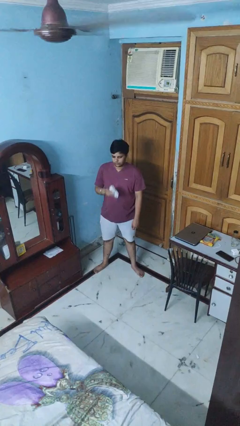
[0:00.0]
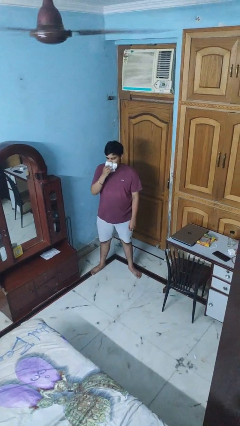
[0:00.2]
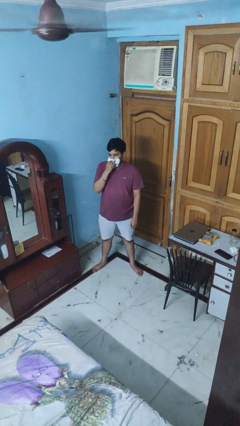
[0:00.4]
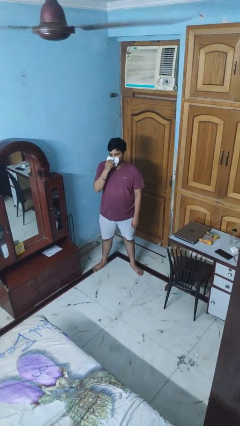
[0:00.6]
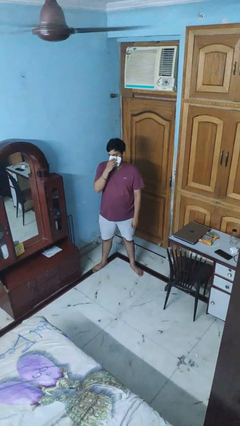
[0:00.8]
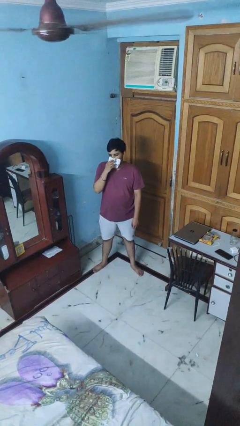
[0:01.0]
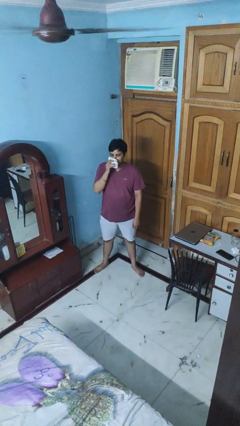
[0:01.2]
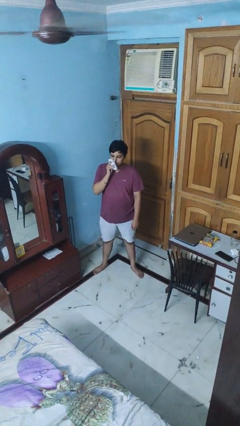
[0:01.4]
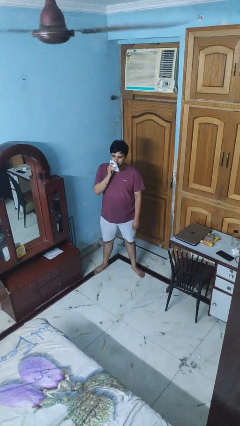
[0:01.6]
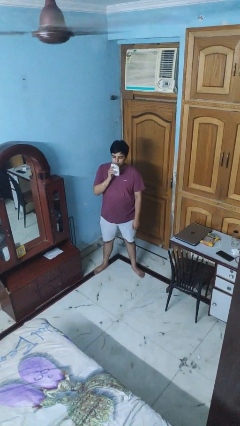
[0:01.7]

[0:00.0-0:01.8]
person wipes mouth with napkin

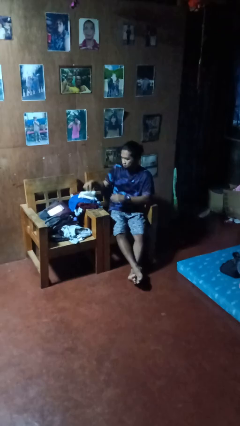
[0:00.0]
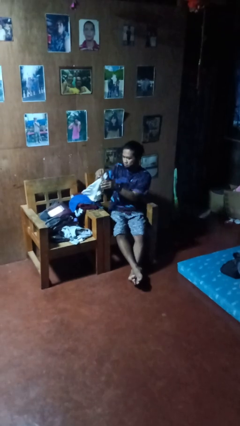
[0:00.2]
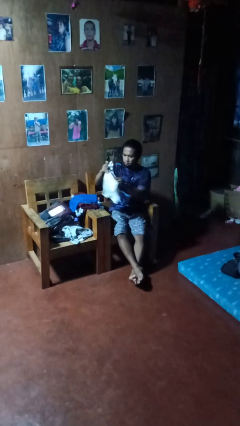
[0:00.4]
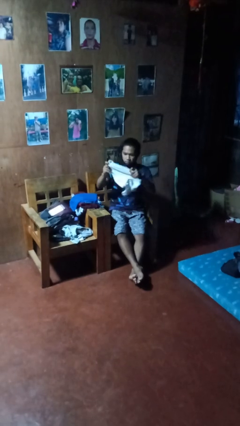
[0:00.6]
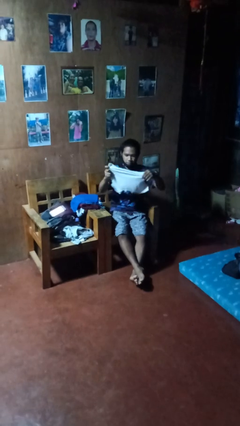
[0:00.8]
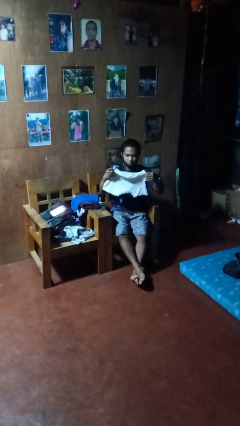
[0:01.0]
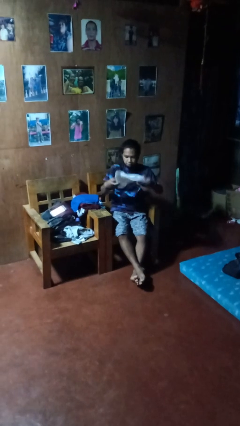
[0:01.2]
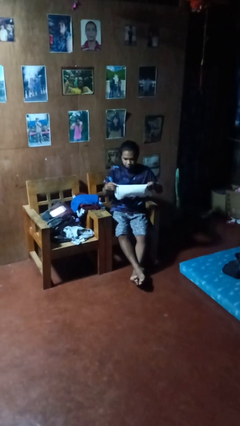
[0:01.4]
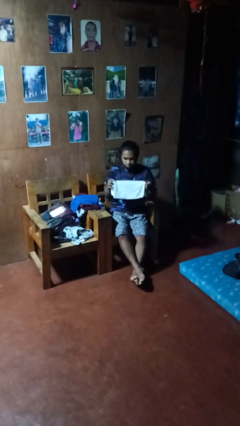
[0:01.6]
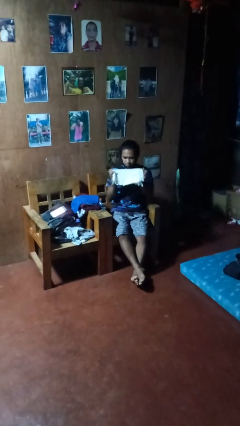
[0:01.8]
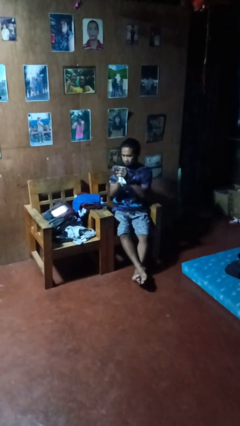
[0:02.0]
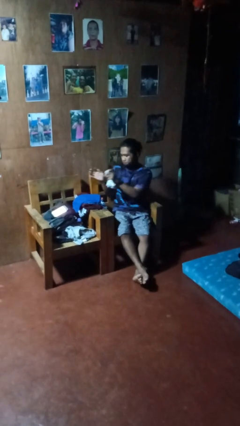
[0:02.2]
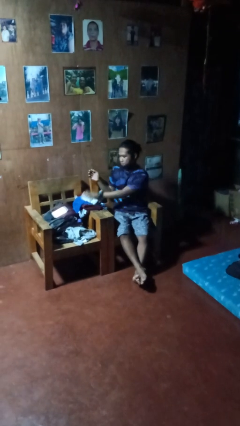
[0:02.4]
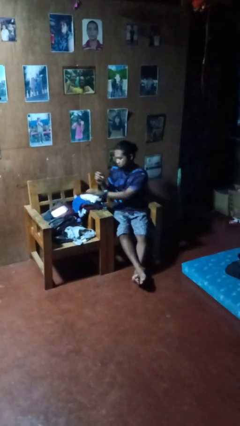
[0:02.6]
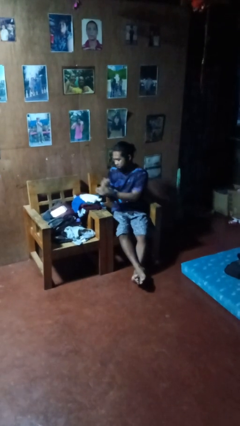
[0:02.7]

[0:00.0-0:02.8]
person folds shirt

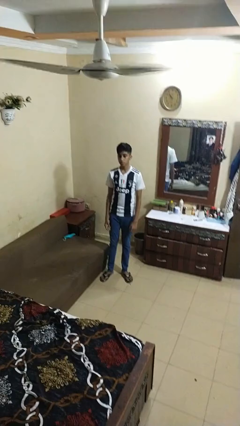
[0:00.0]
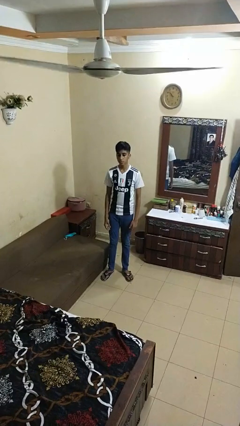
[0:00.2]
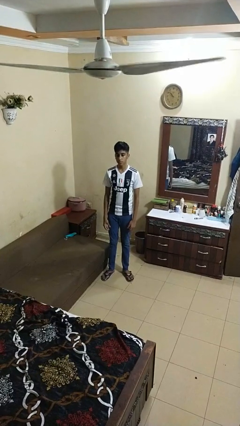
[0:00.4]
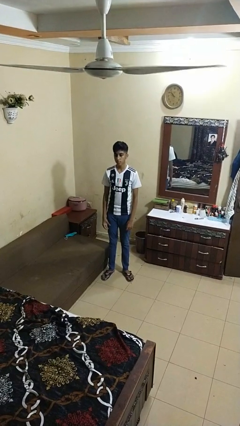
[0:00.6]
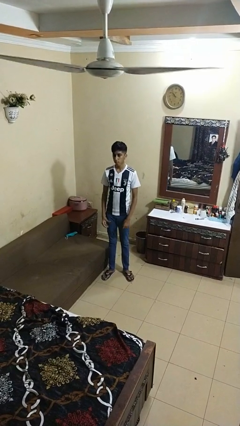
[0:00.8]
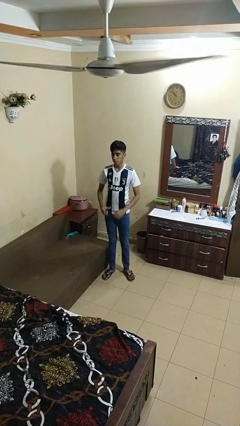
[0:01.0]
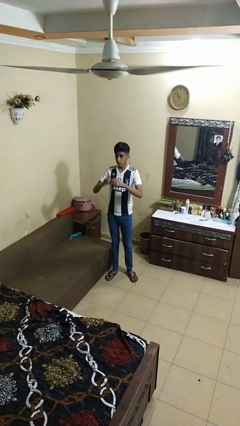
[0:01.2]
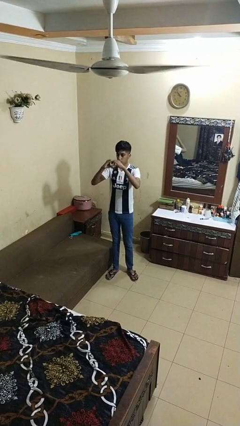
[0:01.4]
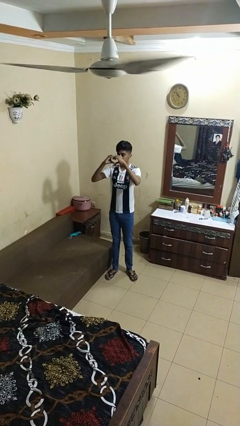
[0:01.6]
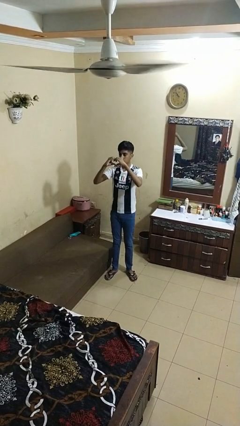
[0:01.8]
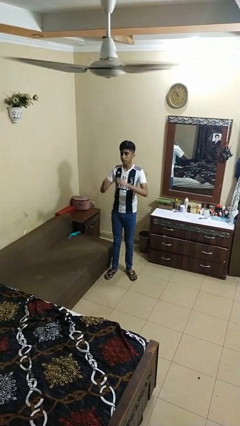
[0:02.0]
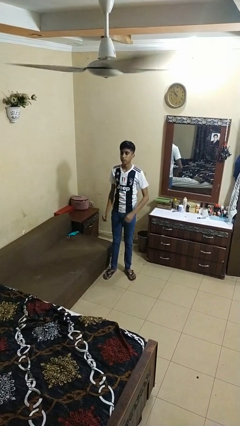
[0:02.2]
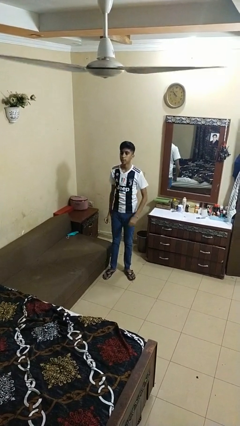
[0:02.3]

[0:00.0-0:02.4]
person gestures heart

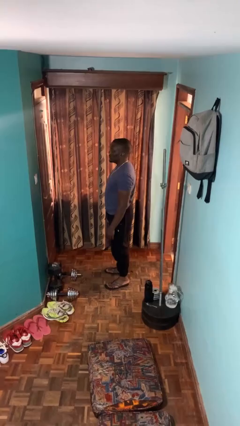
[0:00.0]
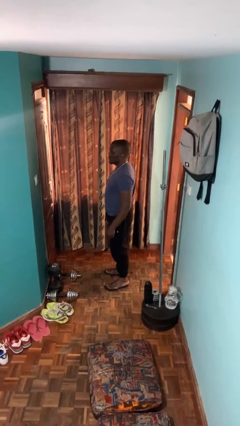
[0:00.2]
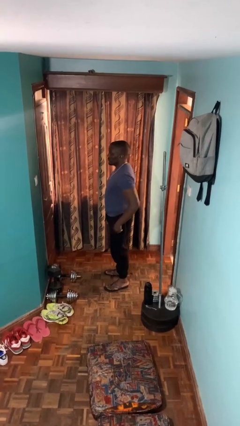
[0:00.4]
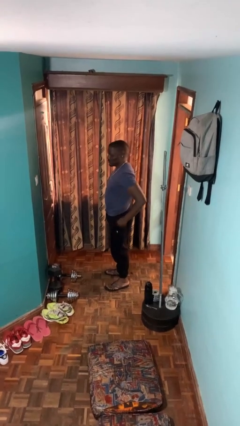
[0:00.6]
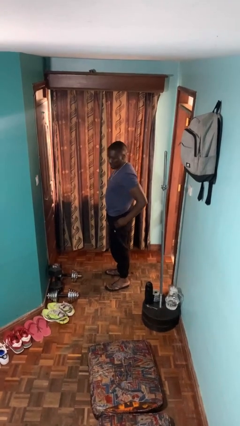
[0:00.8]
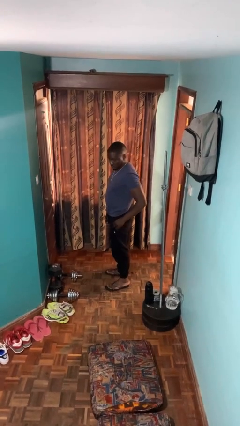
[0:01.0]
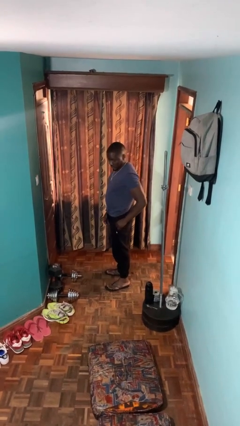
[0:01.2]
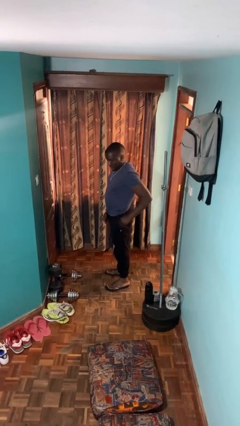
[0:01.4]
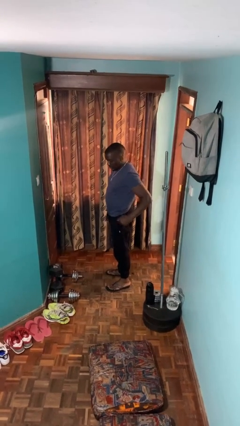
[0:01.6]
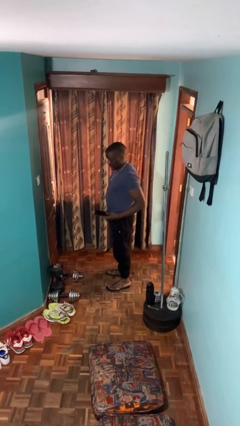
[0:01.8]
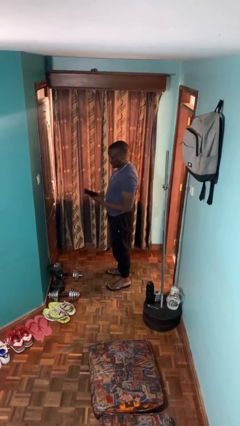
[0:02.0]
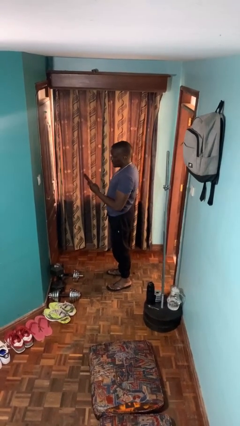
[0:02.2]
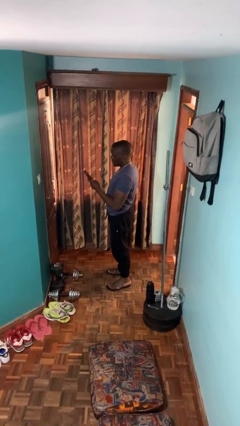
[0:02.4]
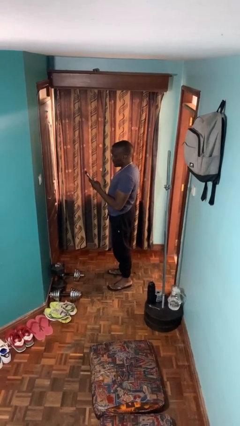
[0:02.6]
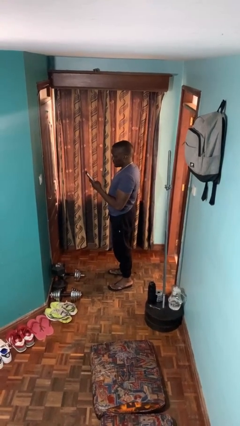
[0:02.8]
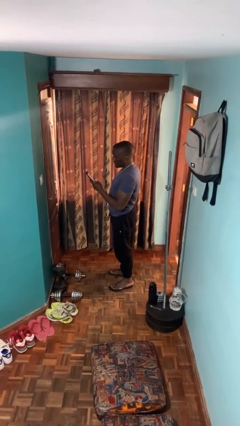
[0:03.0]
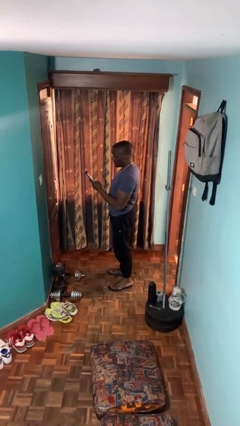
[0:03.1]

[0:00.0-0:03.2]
person takes phone from pocket

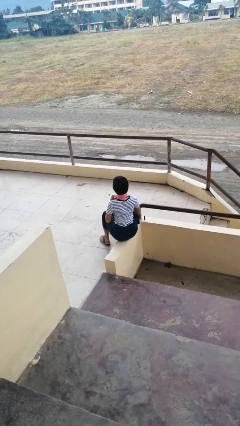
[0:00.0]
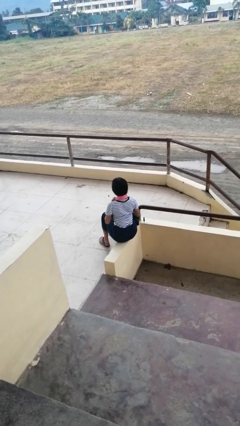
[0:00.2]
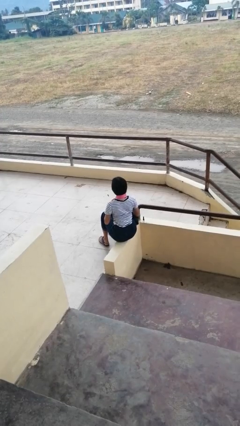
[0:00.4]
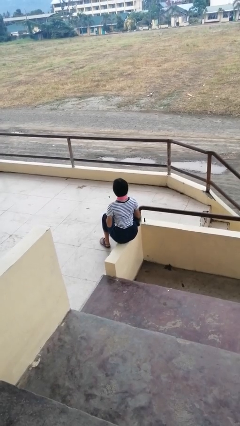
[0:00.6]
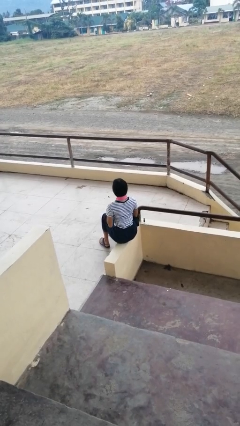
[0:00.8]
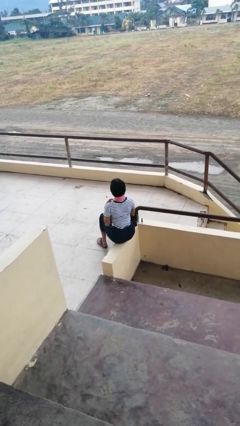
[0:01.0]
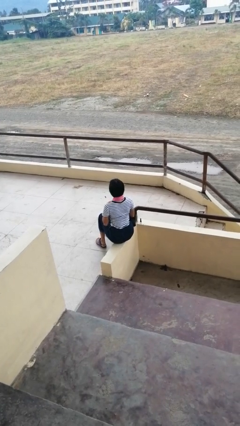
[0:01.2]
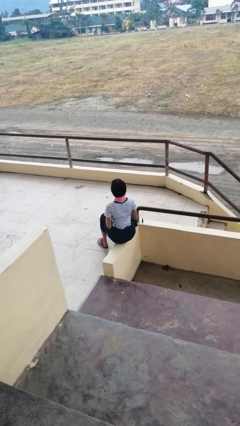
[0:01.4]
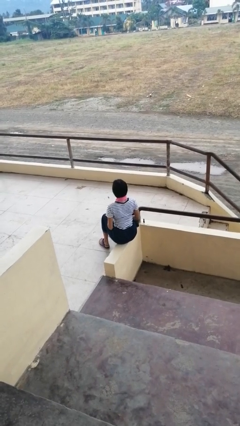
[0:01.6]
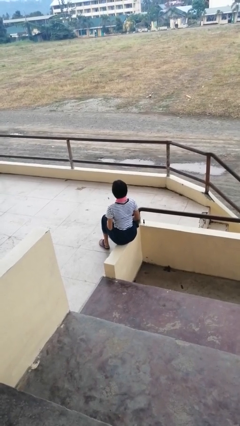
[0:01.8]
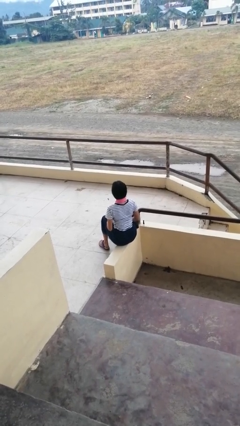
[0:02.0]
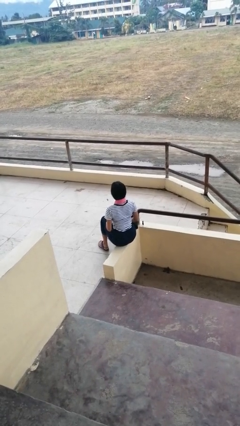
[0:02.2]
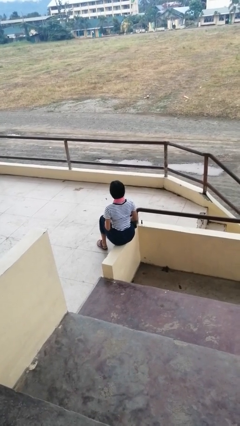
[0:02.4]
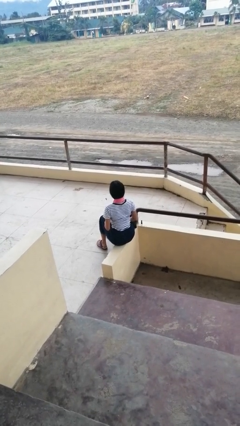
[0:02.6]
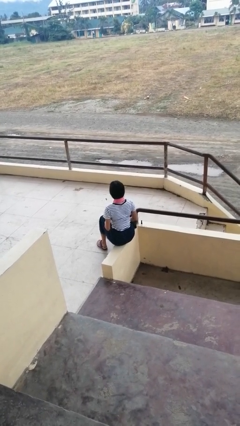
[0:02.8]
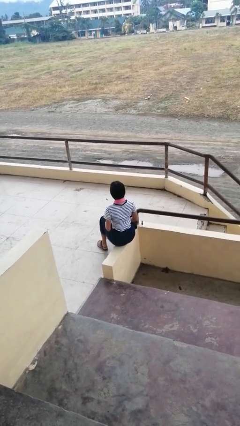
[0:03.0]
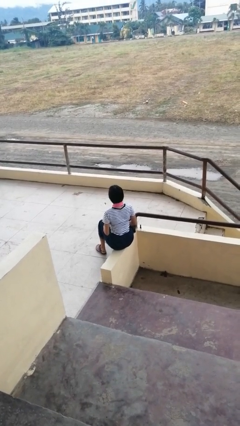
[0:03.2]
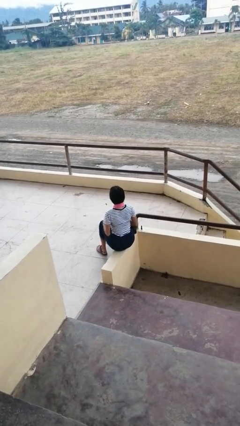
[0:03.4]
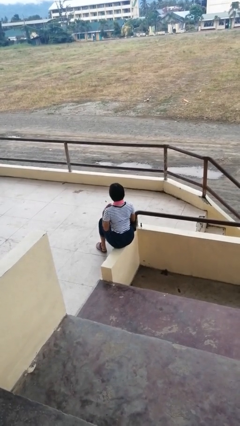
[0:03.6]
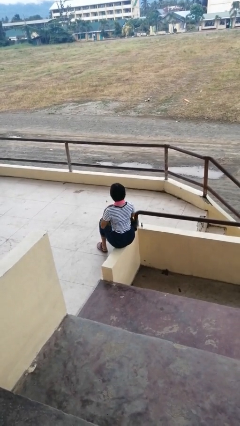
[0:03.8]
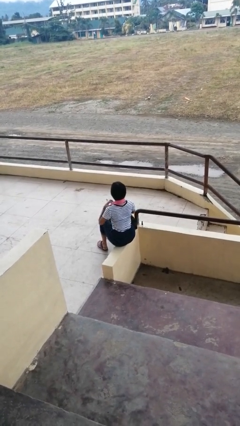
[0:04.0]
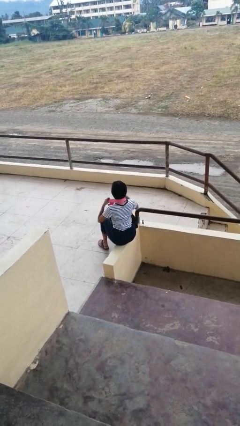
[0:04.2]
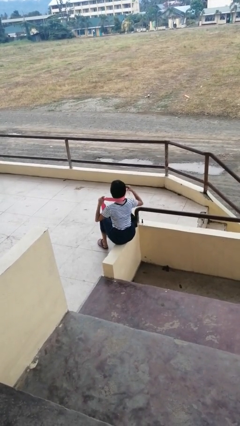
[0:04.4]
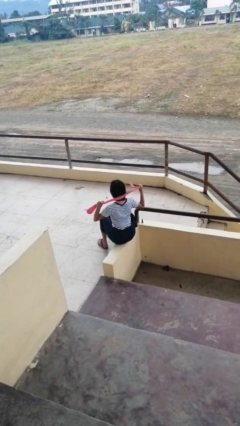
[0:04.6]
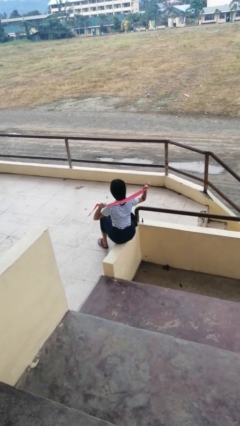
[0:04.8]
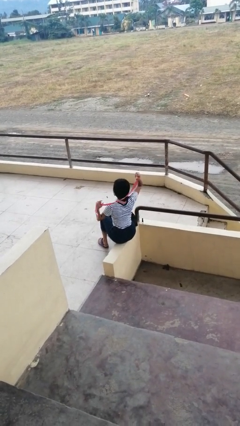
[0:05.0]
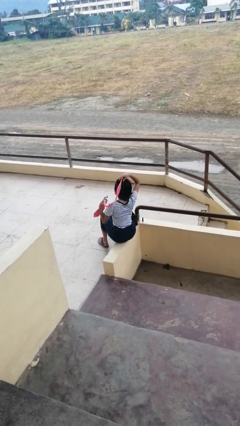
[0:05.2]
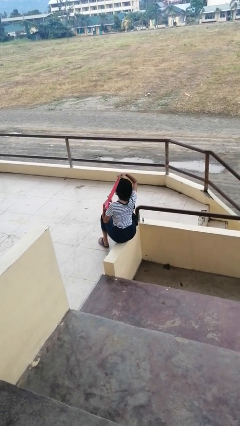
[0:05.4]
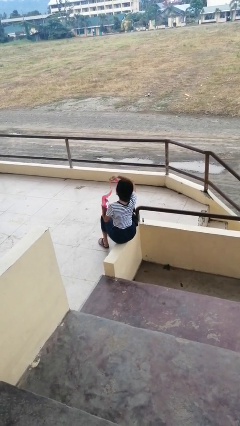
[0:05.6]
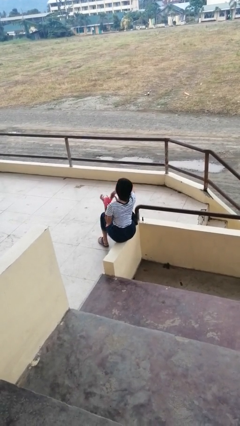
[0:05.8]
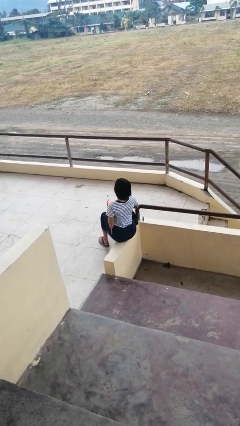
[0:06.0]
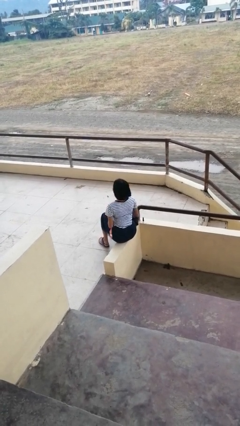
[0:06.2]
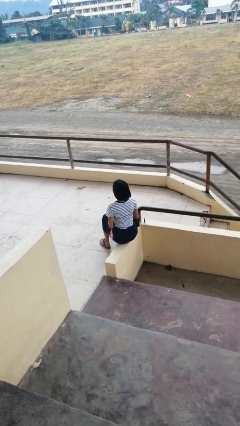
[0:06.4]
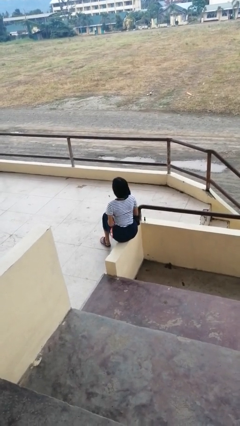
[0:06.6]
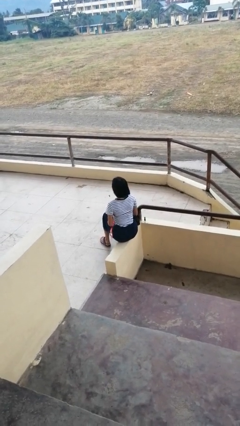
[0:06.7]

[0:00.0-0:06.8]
person takes off necktie

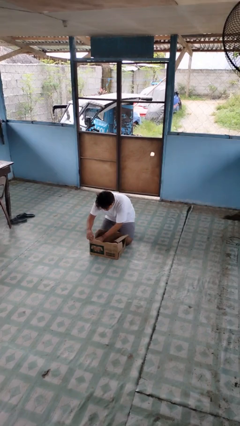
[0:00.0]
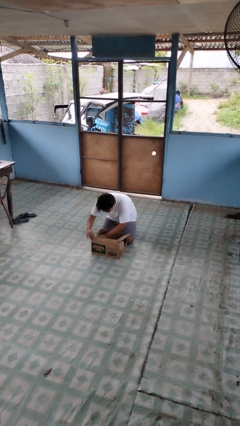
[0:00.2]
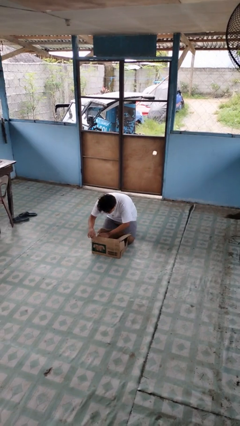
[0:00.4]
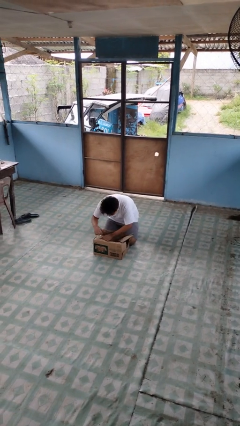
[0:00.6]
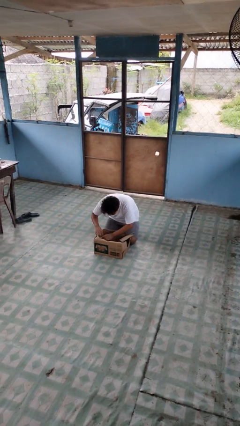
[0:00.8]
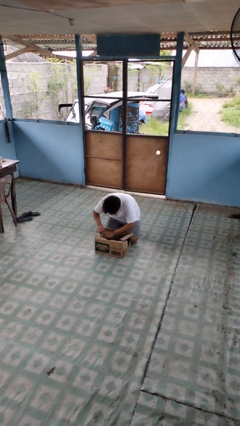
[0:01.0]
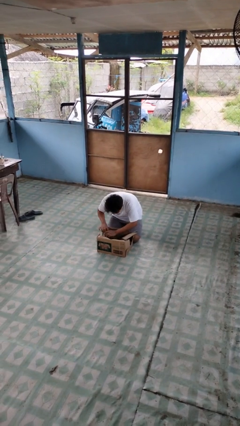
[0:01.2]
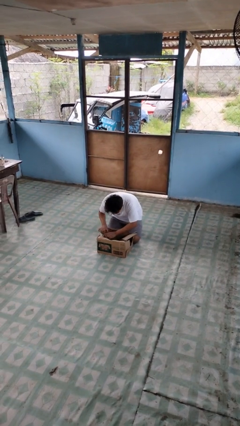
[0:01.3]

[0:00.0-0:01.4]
person searches in box
